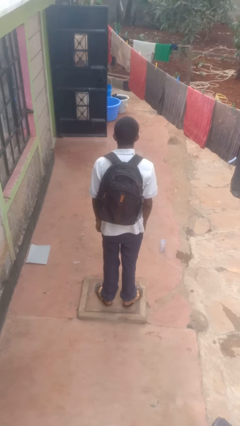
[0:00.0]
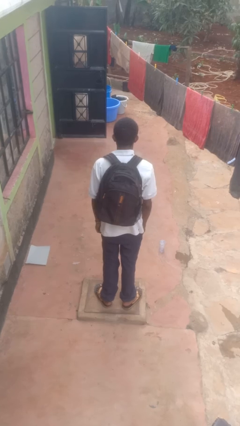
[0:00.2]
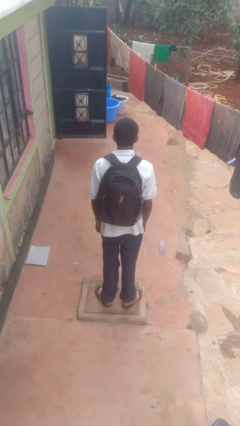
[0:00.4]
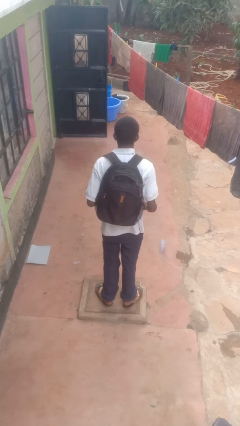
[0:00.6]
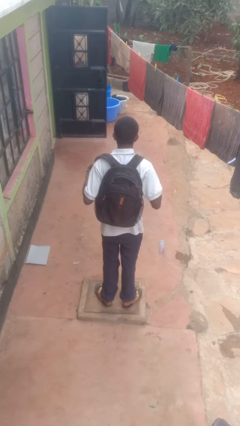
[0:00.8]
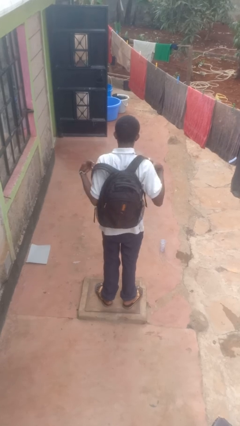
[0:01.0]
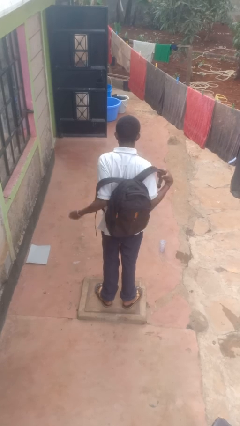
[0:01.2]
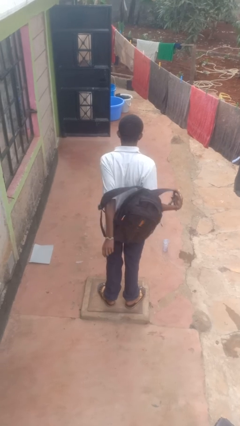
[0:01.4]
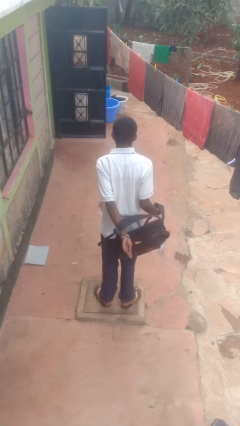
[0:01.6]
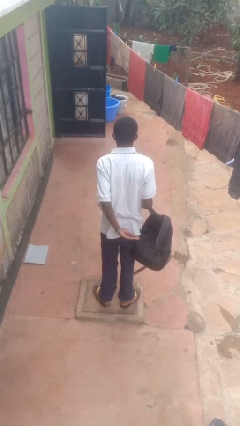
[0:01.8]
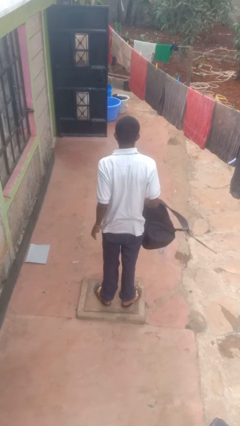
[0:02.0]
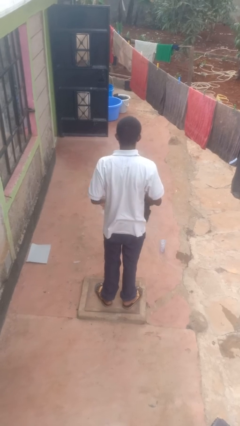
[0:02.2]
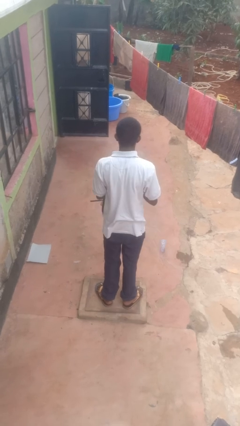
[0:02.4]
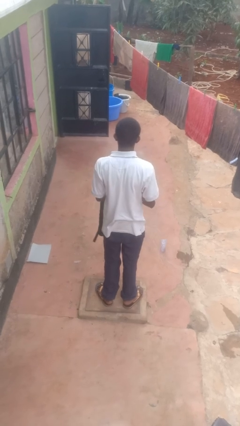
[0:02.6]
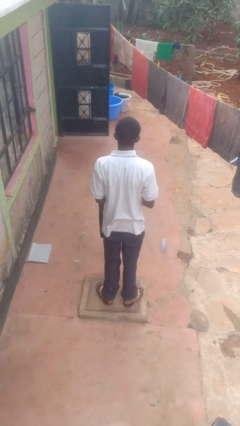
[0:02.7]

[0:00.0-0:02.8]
person takes off backpack

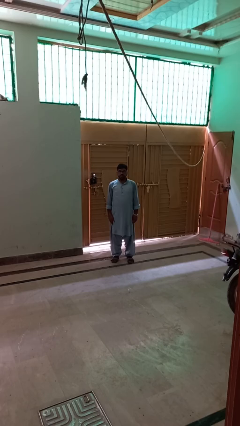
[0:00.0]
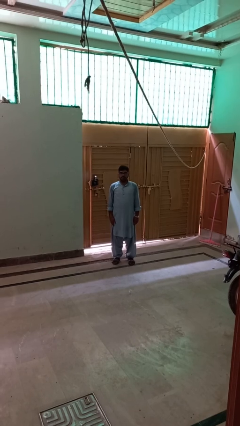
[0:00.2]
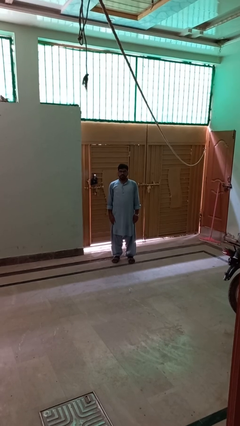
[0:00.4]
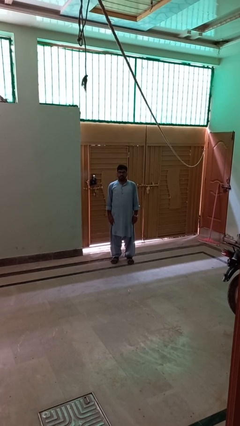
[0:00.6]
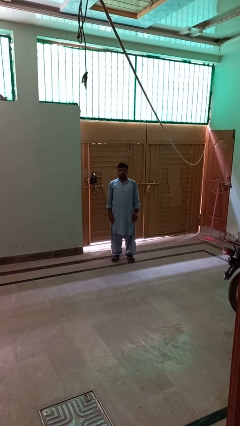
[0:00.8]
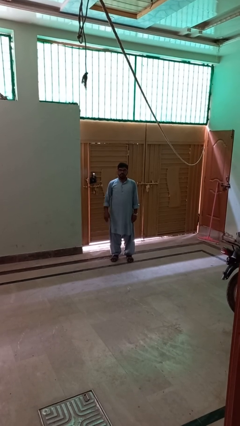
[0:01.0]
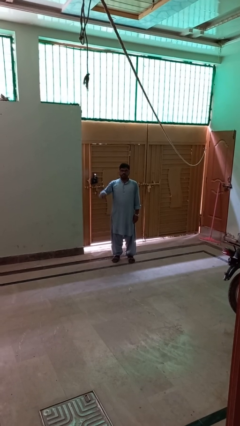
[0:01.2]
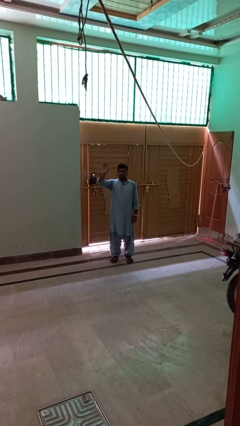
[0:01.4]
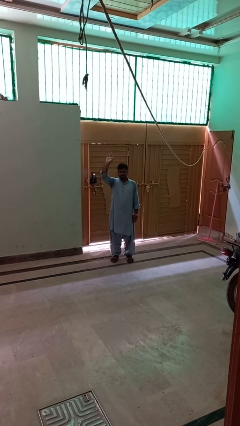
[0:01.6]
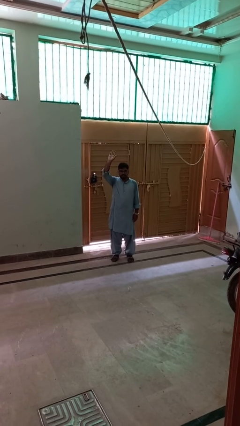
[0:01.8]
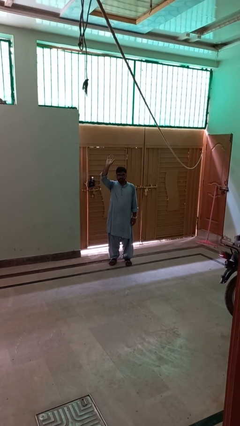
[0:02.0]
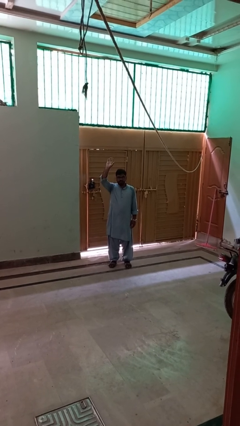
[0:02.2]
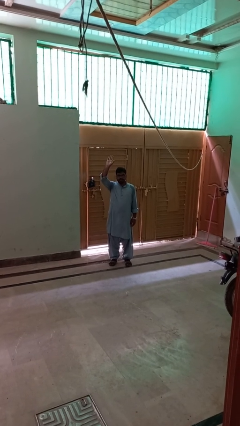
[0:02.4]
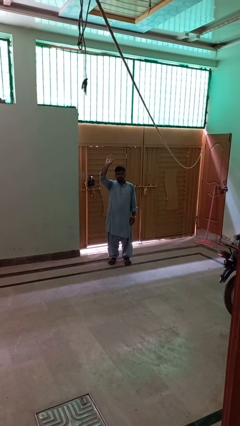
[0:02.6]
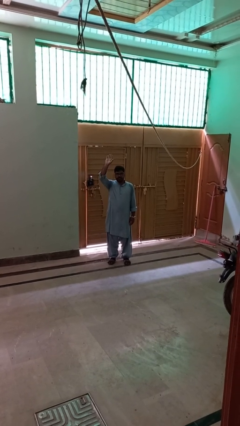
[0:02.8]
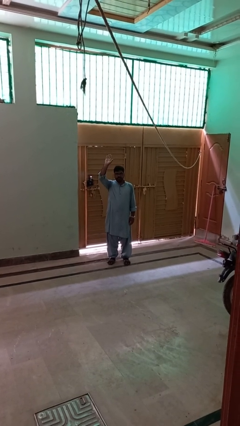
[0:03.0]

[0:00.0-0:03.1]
person gestures raise hand

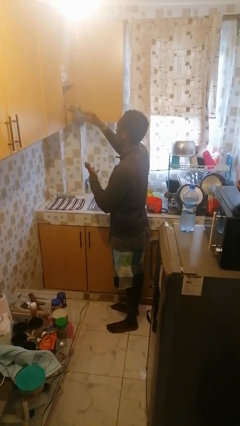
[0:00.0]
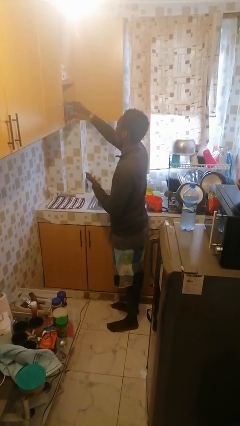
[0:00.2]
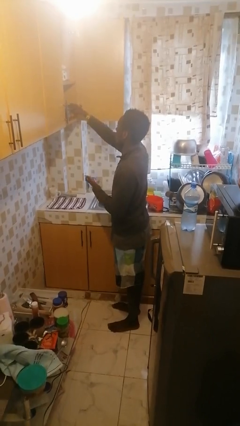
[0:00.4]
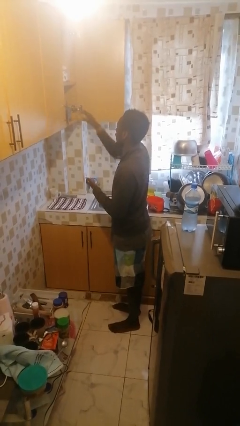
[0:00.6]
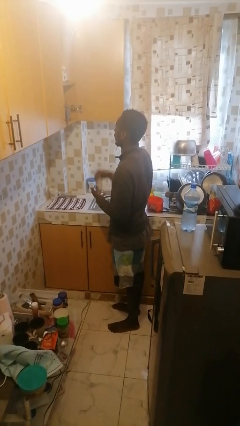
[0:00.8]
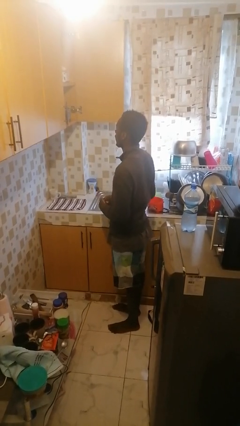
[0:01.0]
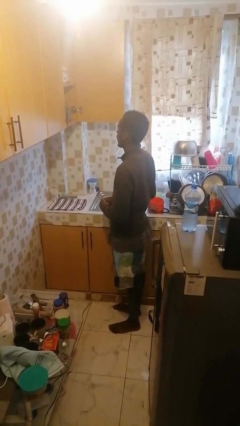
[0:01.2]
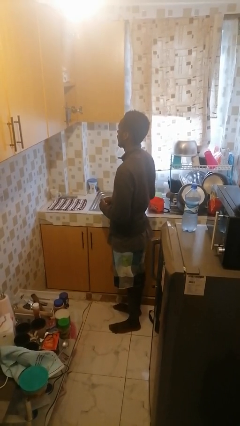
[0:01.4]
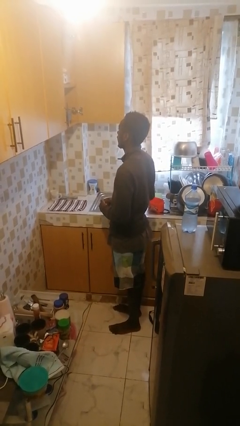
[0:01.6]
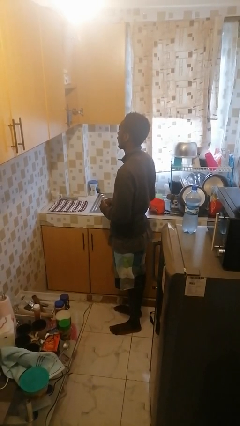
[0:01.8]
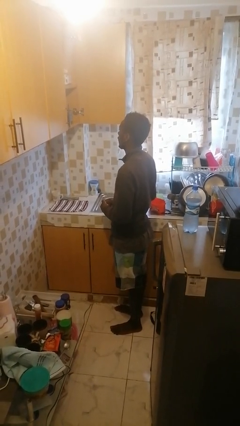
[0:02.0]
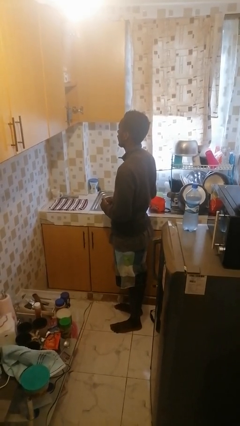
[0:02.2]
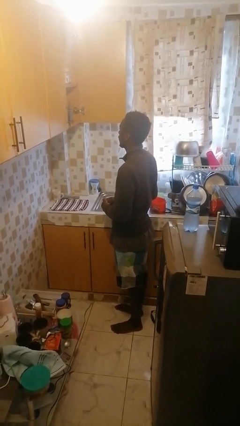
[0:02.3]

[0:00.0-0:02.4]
person puts down object into cabinet

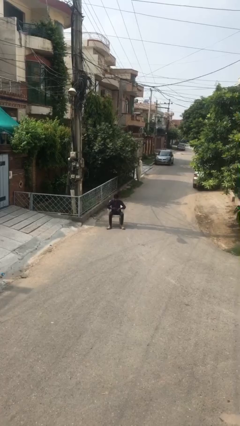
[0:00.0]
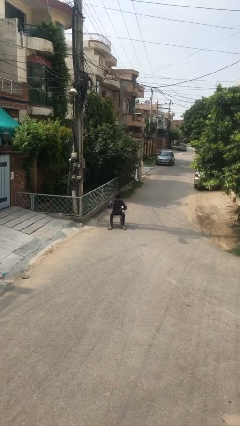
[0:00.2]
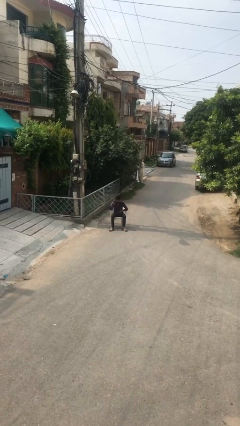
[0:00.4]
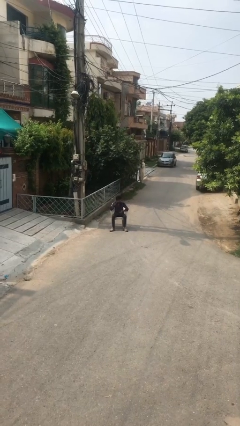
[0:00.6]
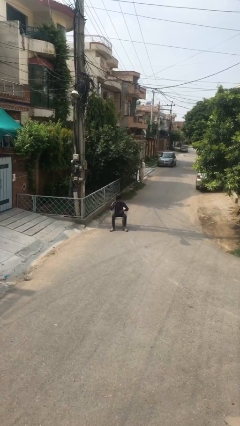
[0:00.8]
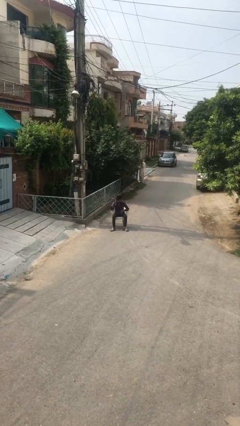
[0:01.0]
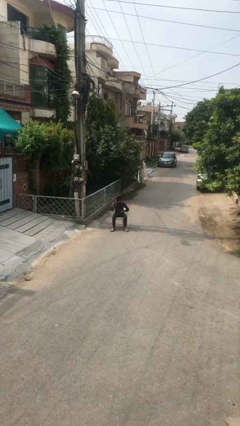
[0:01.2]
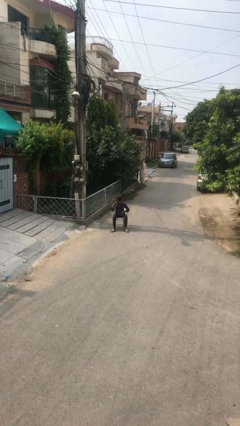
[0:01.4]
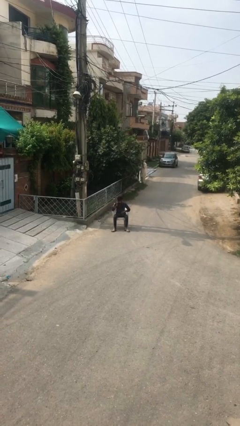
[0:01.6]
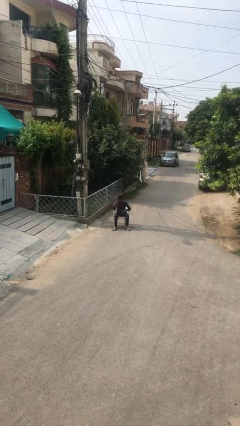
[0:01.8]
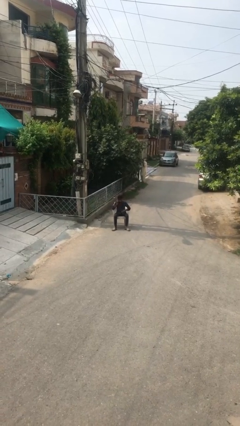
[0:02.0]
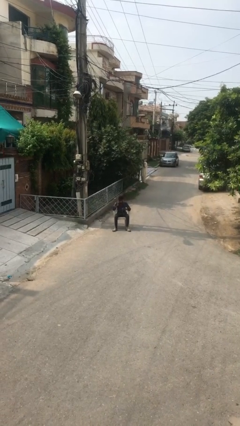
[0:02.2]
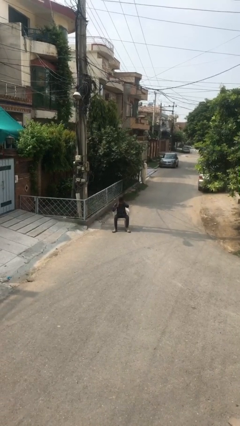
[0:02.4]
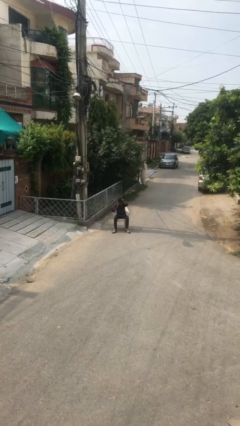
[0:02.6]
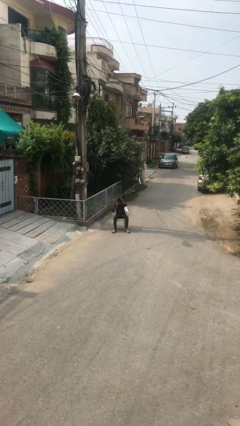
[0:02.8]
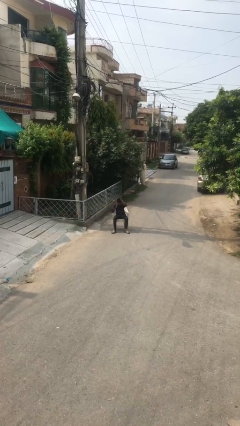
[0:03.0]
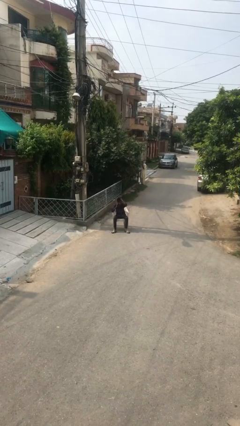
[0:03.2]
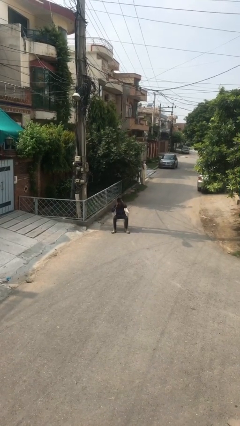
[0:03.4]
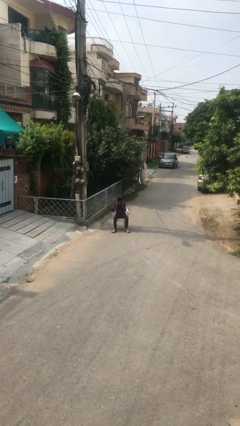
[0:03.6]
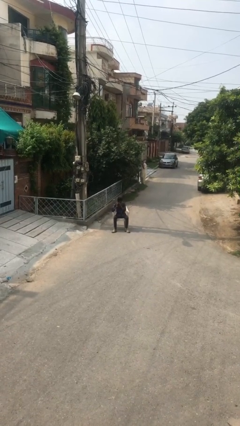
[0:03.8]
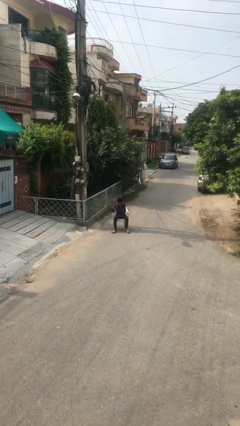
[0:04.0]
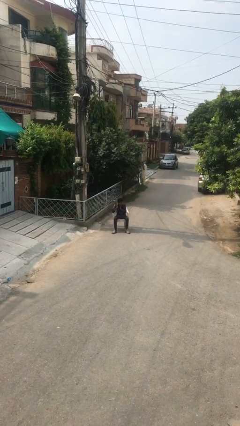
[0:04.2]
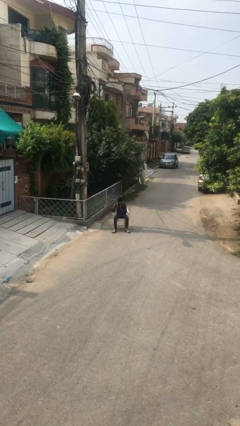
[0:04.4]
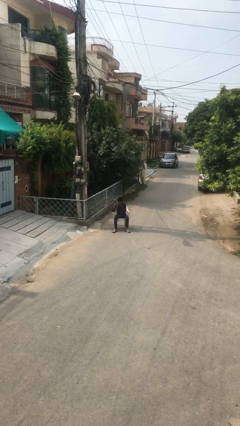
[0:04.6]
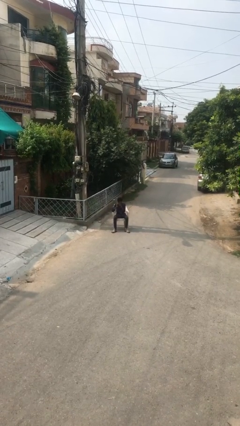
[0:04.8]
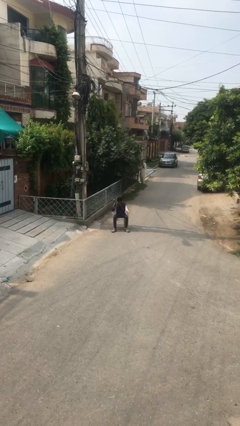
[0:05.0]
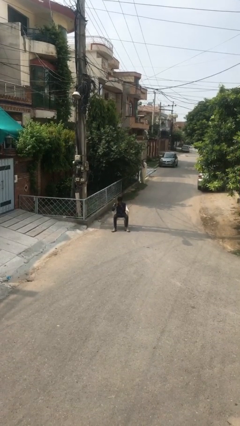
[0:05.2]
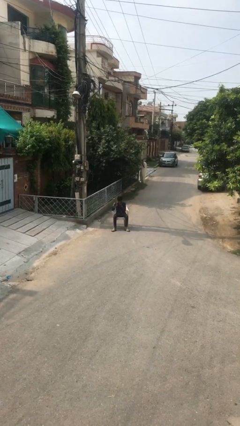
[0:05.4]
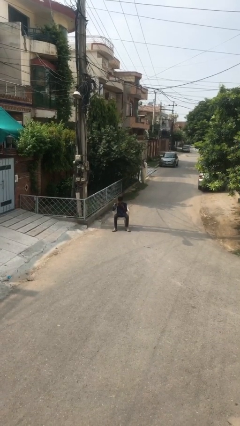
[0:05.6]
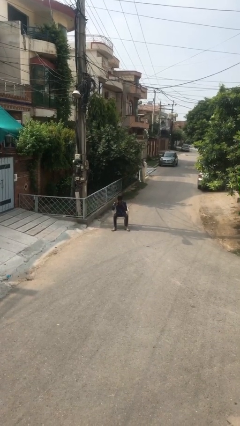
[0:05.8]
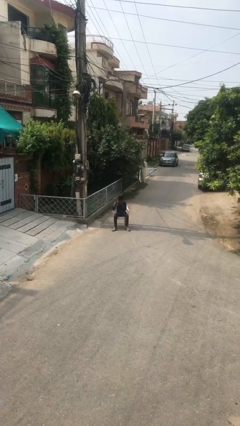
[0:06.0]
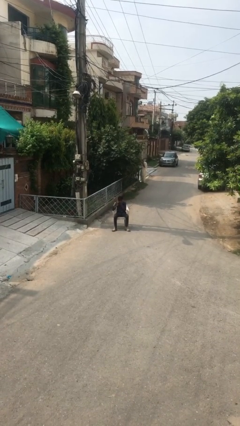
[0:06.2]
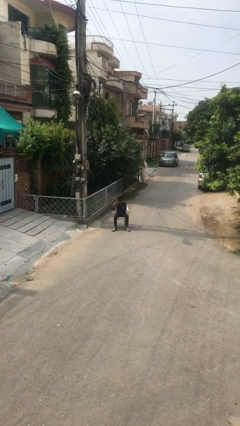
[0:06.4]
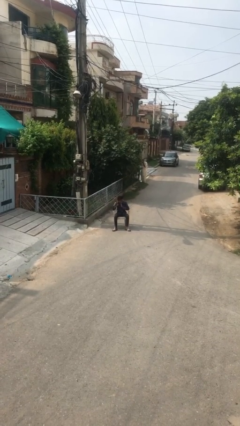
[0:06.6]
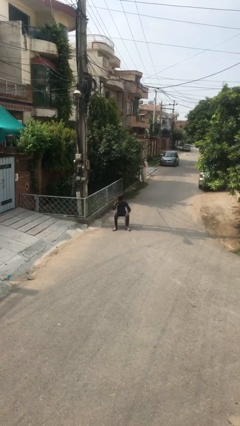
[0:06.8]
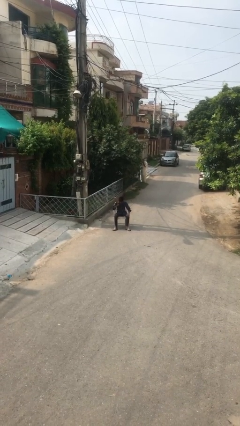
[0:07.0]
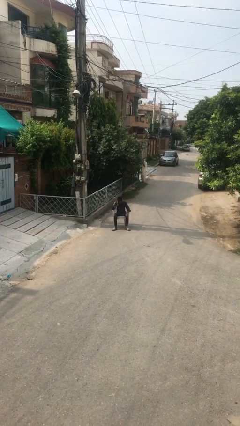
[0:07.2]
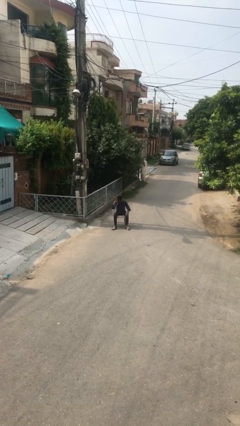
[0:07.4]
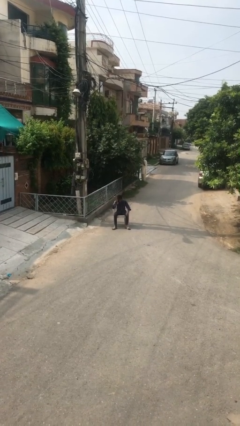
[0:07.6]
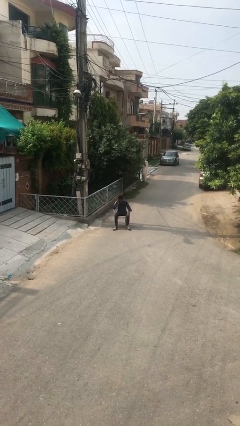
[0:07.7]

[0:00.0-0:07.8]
person talks on phone

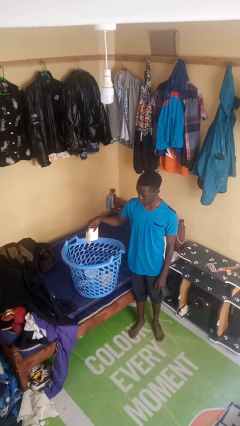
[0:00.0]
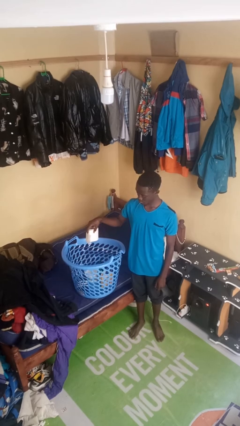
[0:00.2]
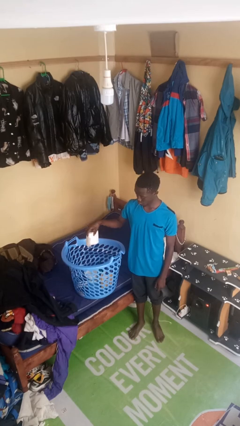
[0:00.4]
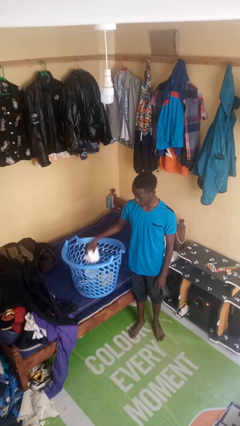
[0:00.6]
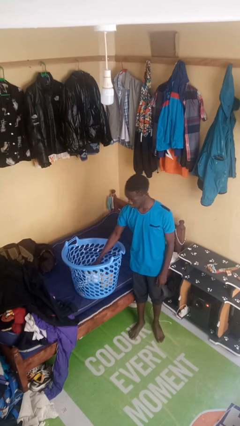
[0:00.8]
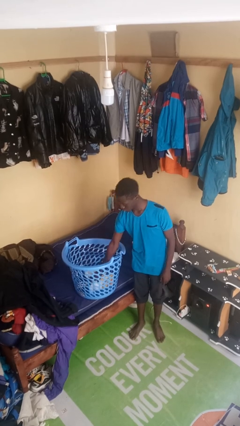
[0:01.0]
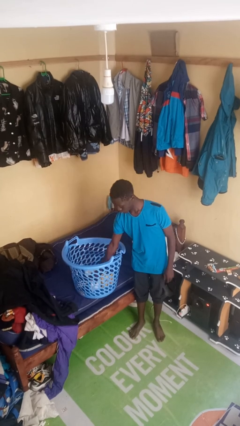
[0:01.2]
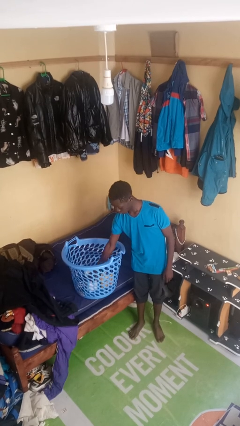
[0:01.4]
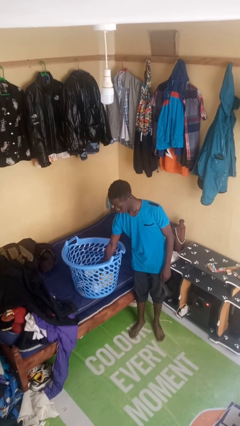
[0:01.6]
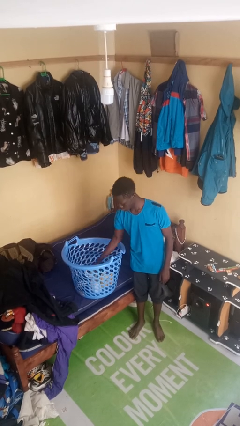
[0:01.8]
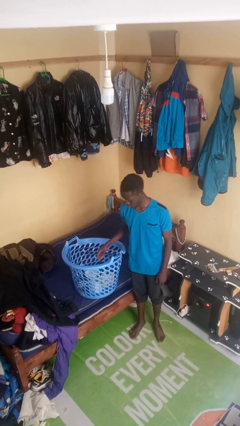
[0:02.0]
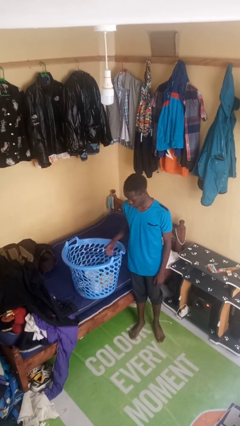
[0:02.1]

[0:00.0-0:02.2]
person puts object into basket
